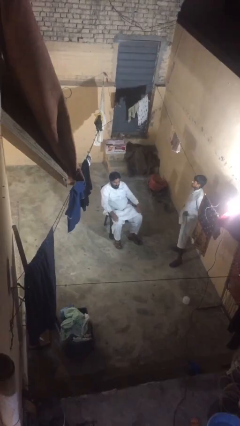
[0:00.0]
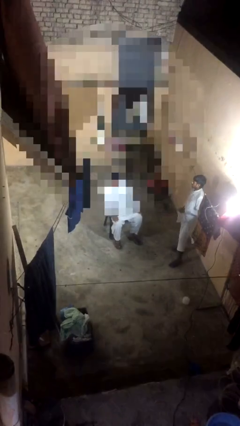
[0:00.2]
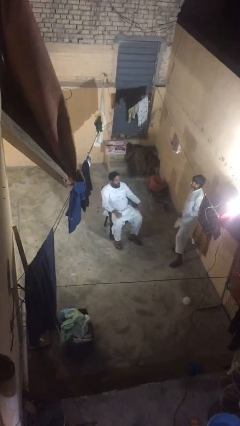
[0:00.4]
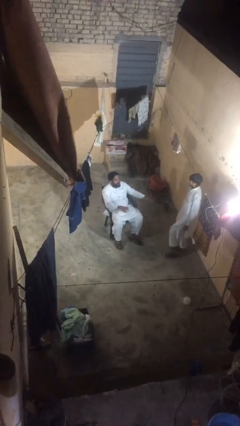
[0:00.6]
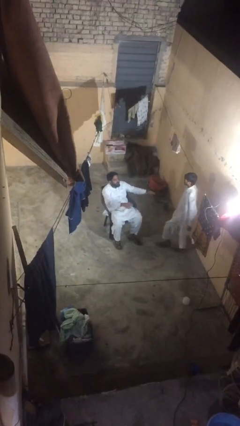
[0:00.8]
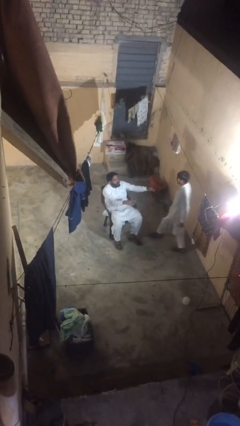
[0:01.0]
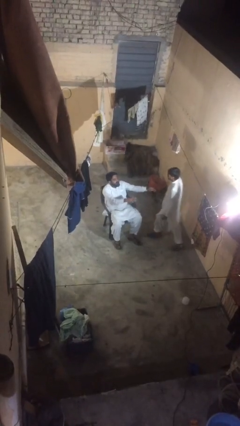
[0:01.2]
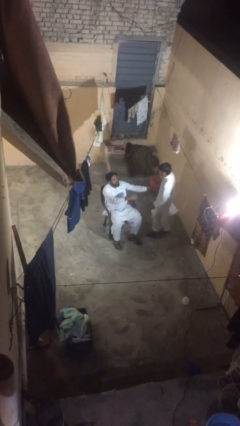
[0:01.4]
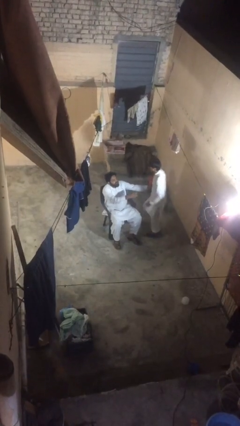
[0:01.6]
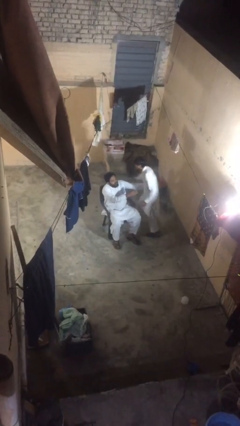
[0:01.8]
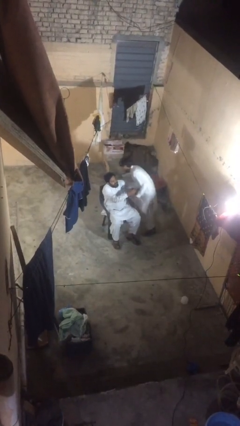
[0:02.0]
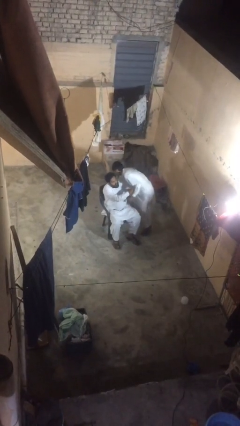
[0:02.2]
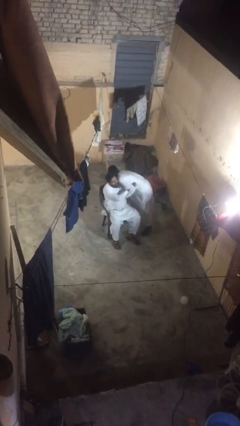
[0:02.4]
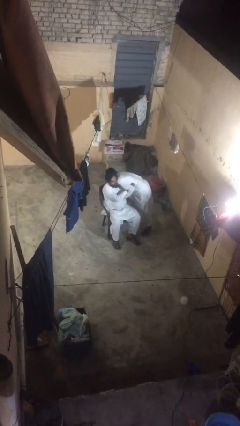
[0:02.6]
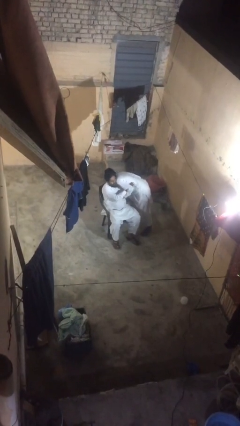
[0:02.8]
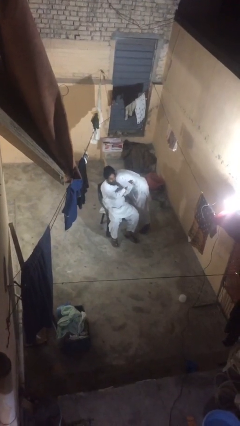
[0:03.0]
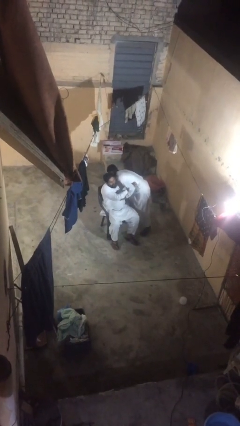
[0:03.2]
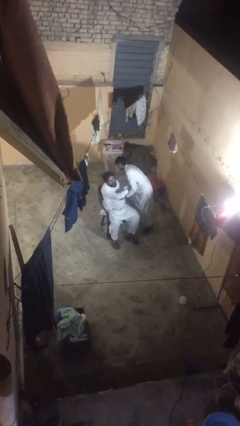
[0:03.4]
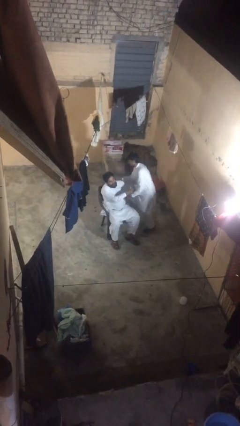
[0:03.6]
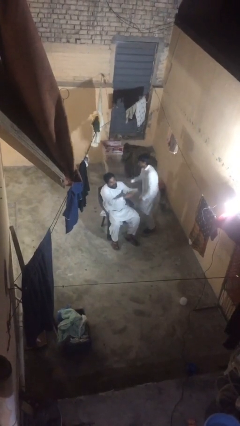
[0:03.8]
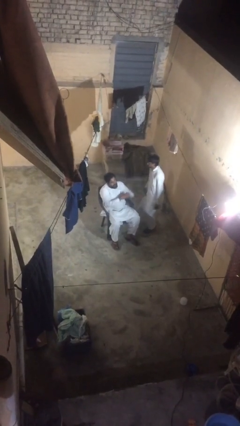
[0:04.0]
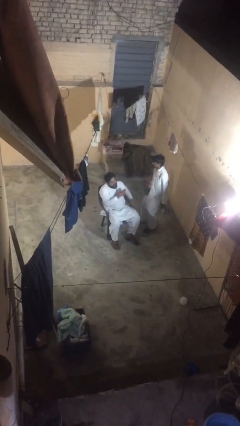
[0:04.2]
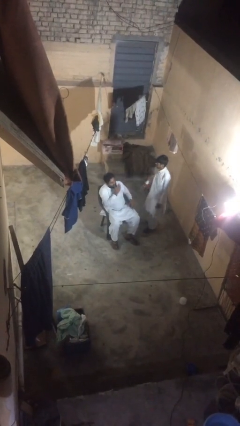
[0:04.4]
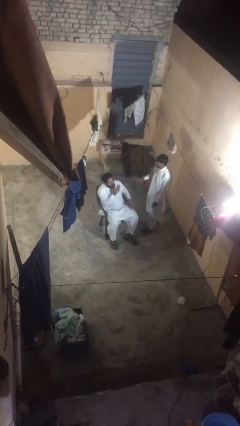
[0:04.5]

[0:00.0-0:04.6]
person embraces person

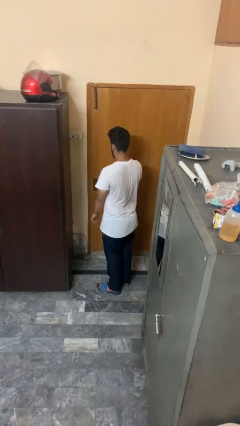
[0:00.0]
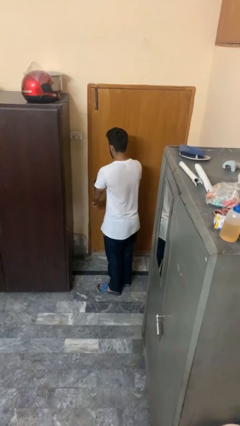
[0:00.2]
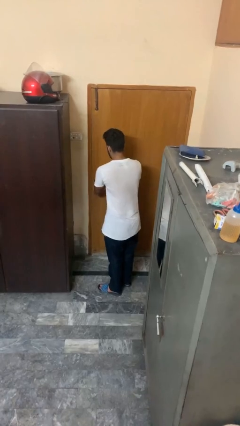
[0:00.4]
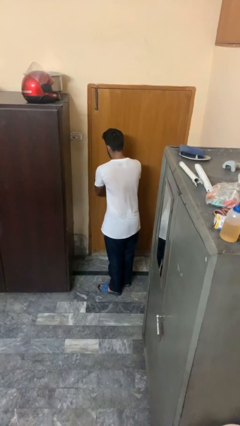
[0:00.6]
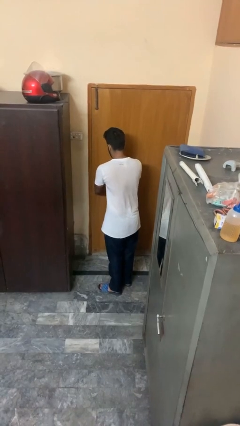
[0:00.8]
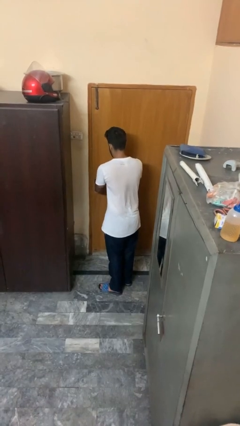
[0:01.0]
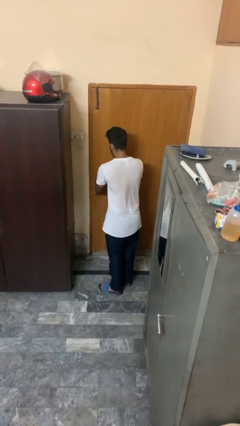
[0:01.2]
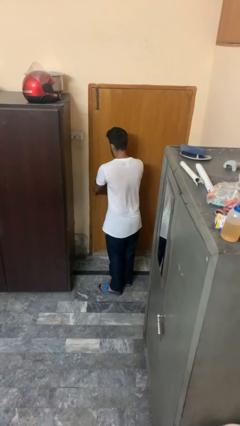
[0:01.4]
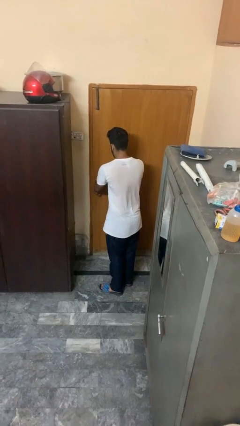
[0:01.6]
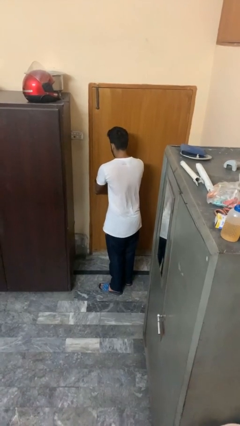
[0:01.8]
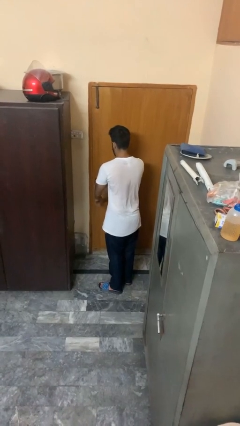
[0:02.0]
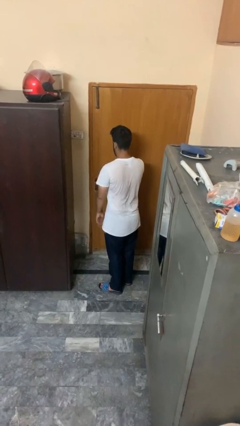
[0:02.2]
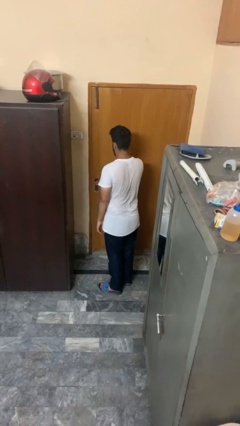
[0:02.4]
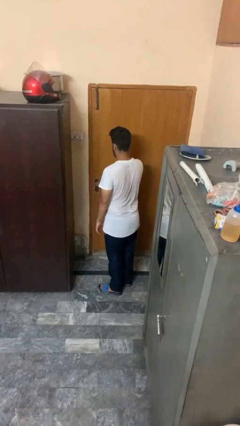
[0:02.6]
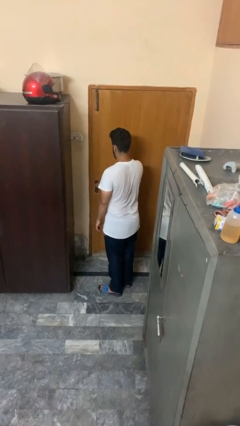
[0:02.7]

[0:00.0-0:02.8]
person unlocks door with keys

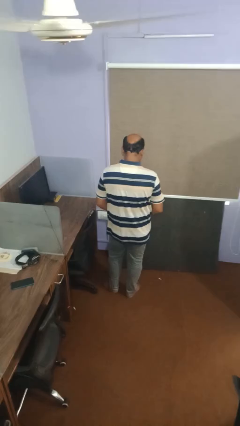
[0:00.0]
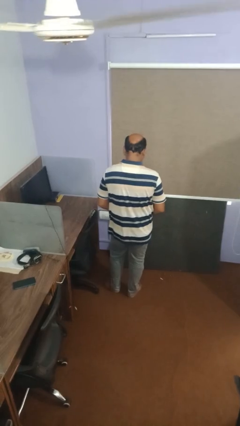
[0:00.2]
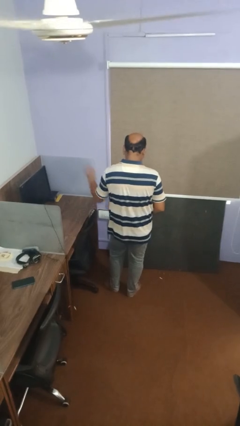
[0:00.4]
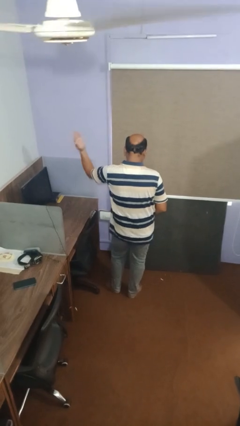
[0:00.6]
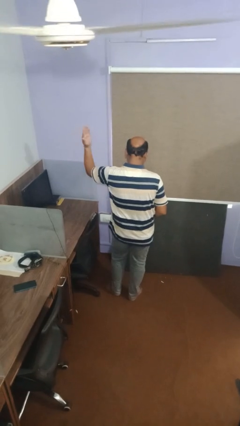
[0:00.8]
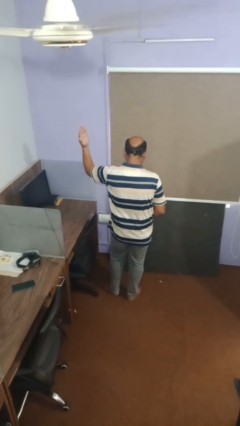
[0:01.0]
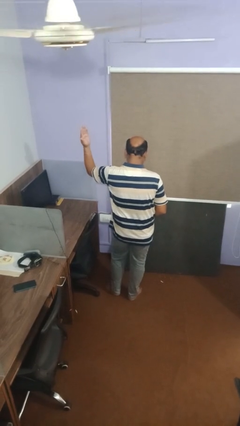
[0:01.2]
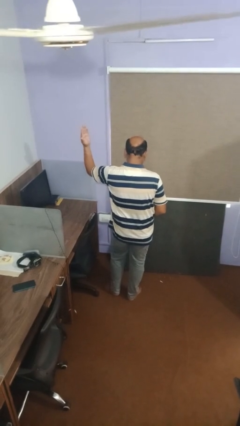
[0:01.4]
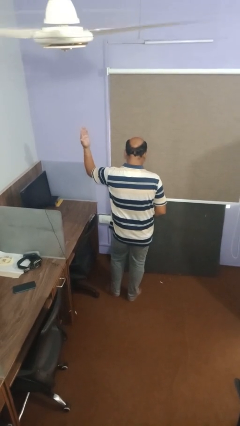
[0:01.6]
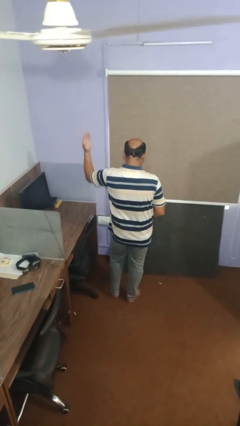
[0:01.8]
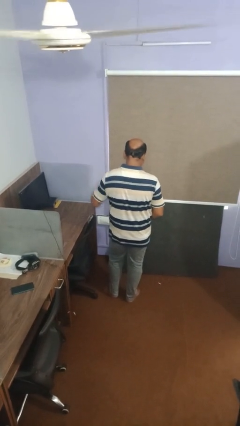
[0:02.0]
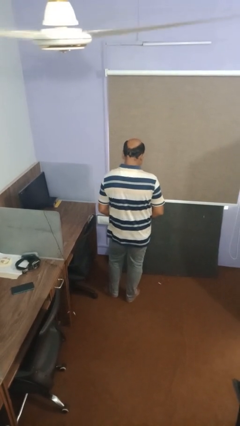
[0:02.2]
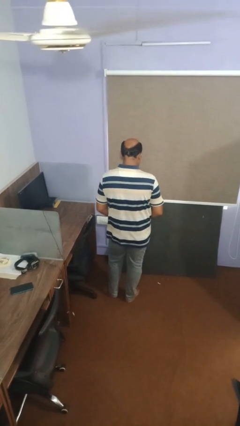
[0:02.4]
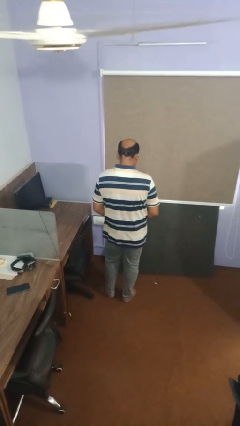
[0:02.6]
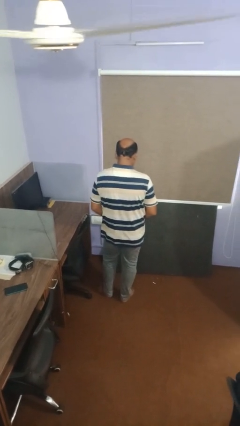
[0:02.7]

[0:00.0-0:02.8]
person gestures swipe left

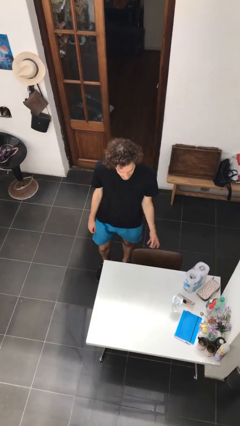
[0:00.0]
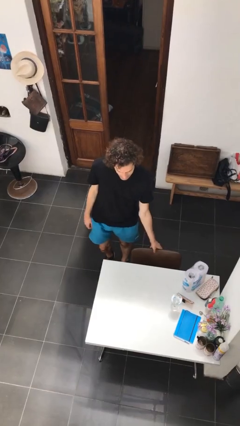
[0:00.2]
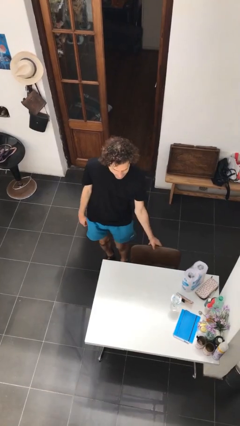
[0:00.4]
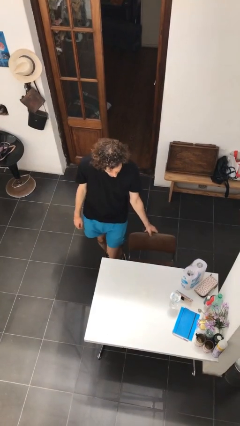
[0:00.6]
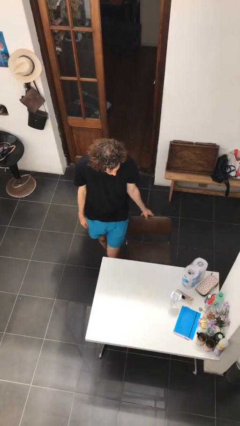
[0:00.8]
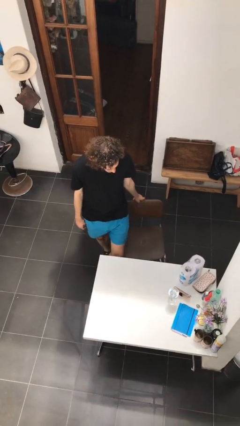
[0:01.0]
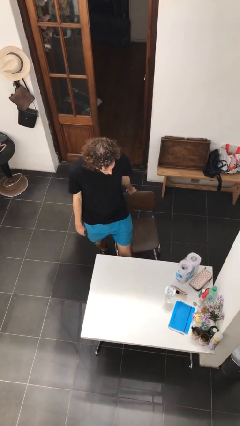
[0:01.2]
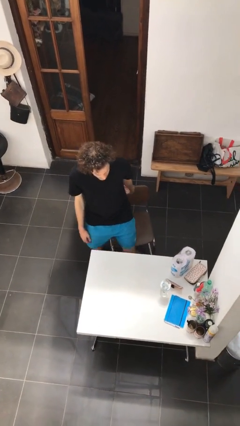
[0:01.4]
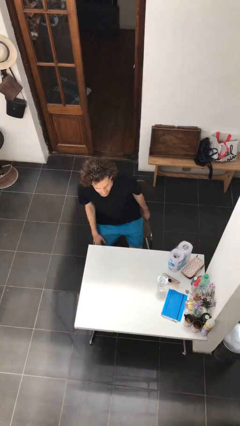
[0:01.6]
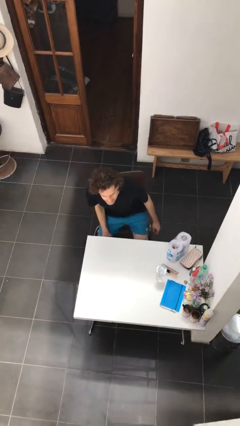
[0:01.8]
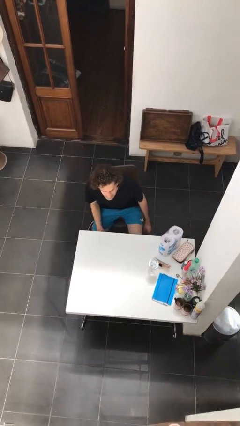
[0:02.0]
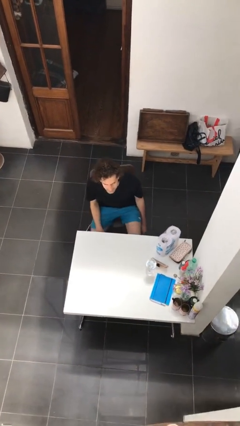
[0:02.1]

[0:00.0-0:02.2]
person sits down

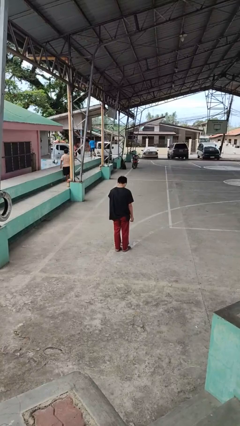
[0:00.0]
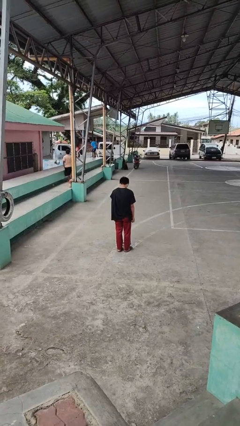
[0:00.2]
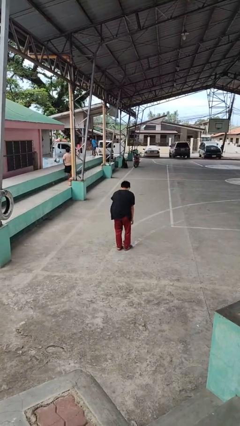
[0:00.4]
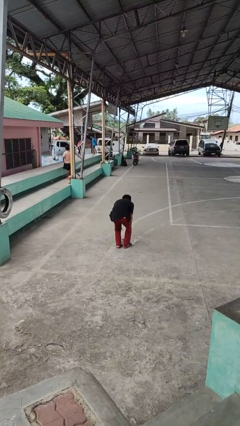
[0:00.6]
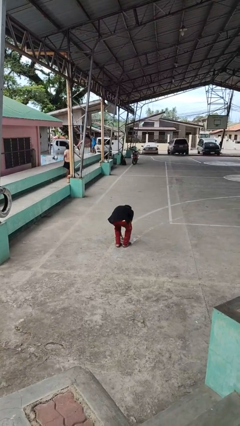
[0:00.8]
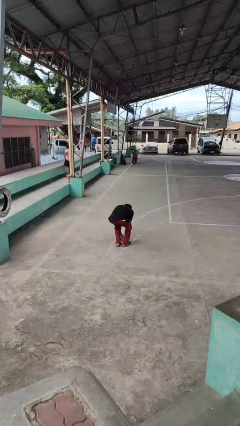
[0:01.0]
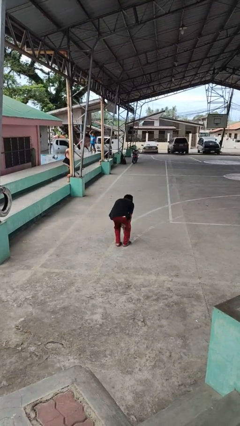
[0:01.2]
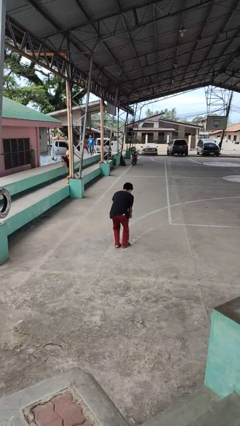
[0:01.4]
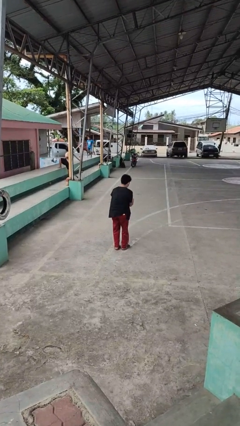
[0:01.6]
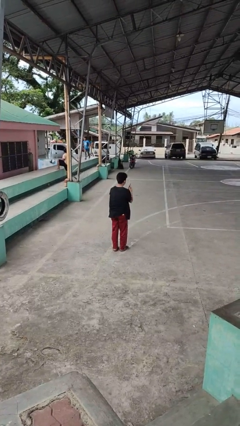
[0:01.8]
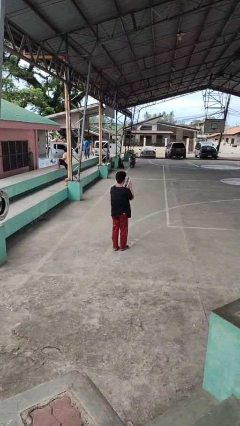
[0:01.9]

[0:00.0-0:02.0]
person picks up object from floor

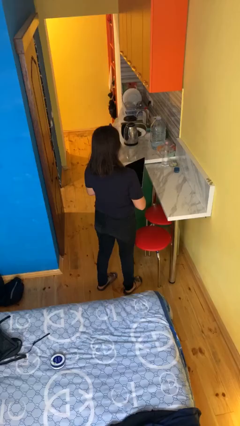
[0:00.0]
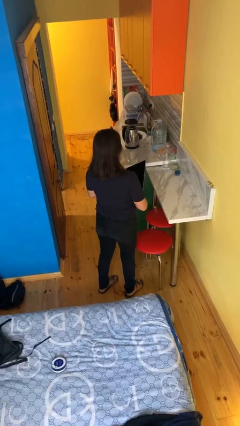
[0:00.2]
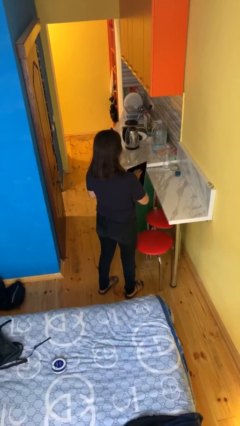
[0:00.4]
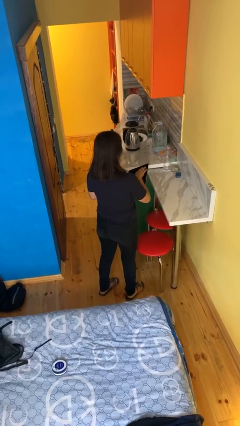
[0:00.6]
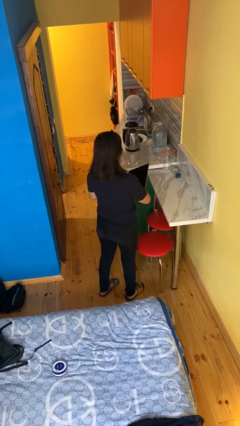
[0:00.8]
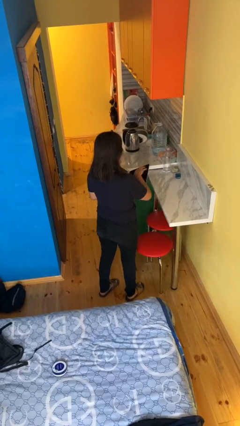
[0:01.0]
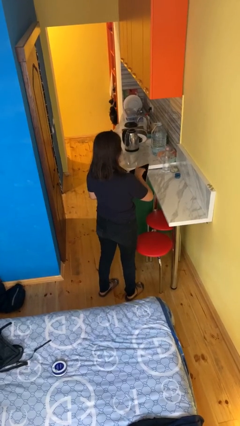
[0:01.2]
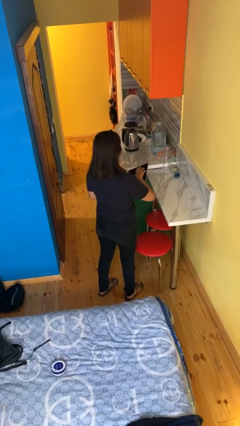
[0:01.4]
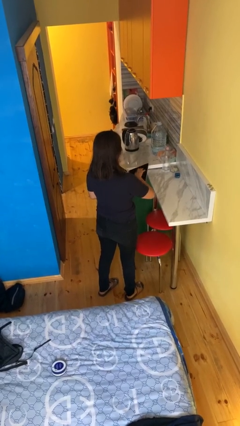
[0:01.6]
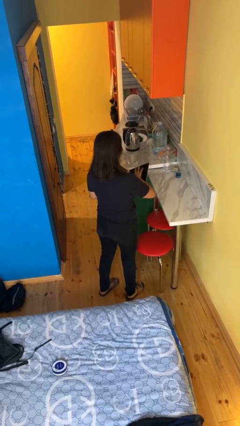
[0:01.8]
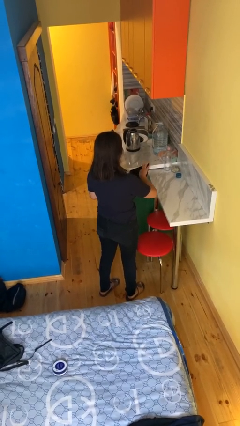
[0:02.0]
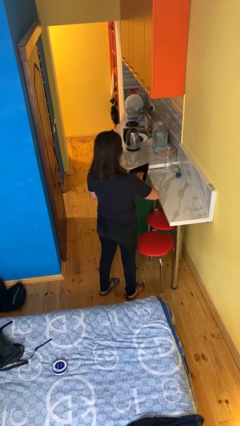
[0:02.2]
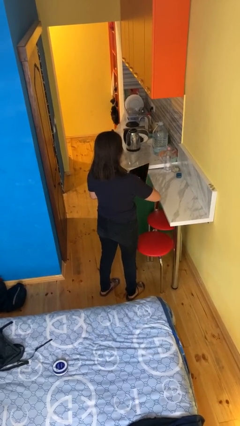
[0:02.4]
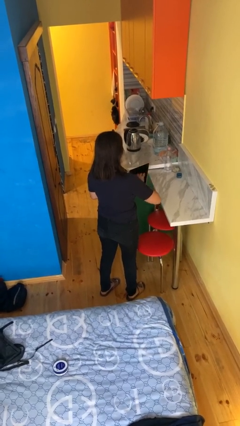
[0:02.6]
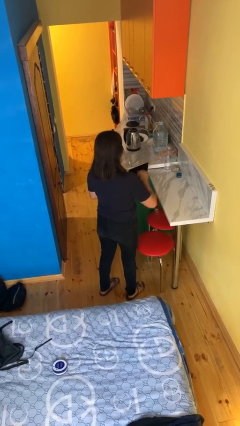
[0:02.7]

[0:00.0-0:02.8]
person interacts with tablet

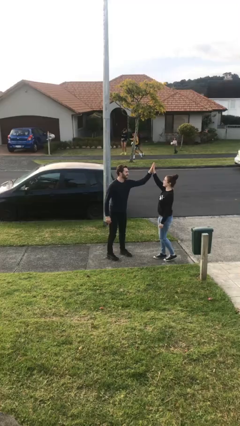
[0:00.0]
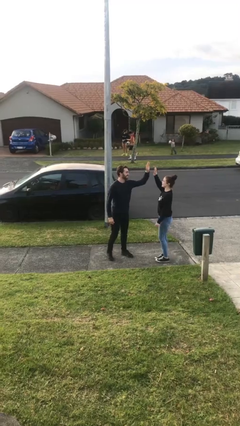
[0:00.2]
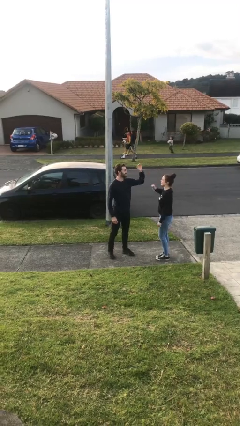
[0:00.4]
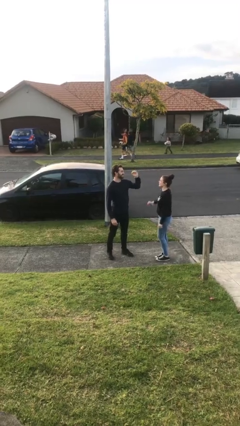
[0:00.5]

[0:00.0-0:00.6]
person highfives hand
